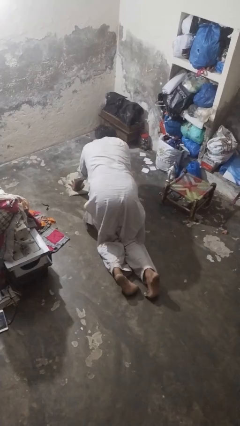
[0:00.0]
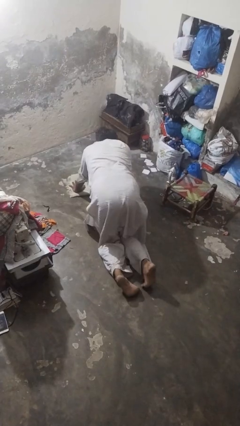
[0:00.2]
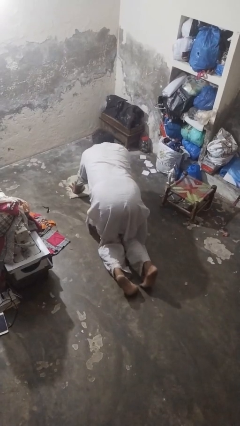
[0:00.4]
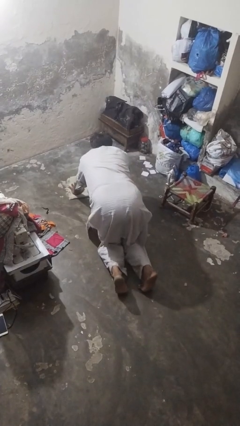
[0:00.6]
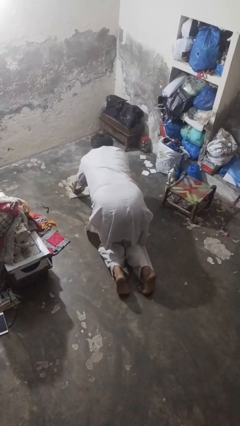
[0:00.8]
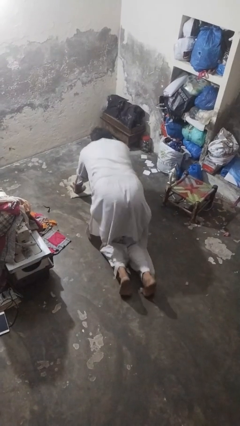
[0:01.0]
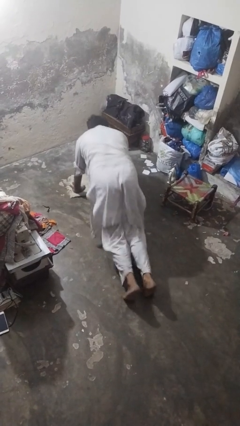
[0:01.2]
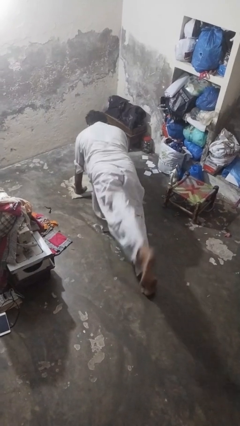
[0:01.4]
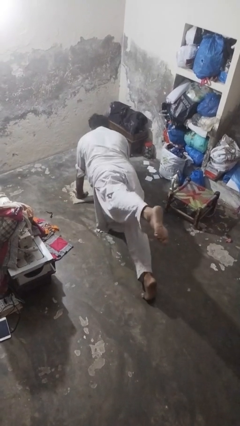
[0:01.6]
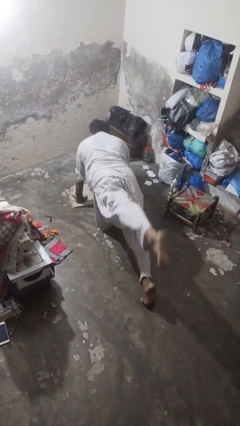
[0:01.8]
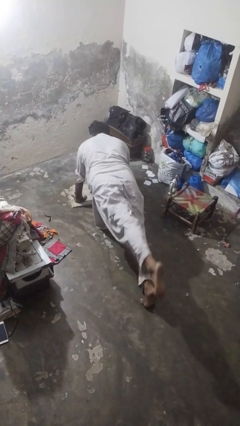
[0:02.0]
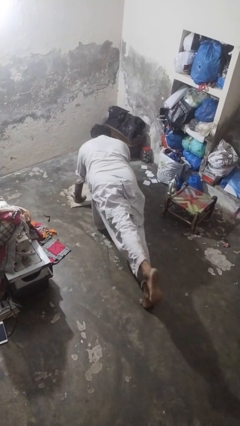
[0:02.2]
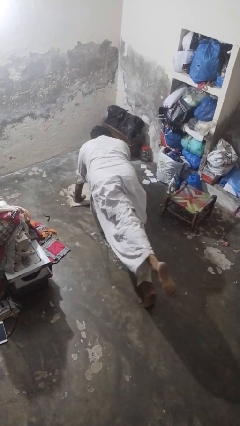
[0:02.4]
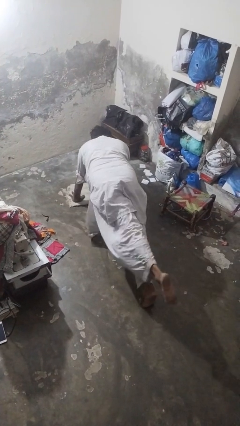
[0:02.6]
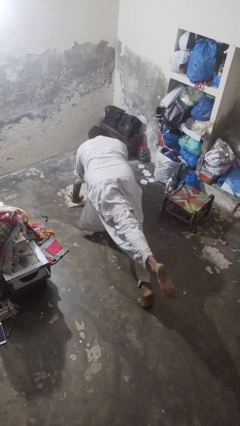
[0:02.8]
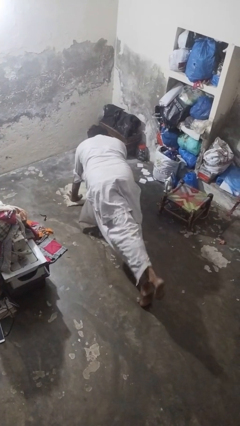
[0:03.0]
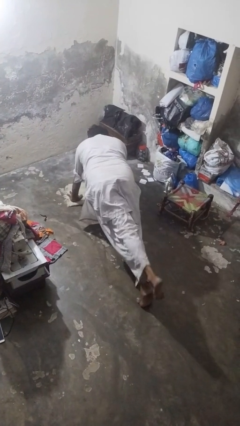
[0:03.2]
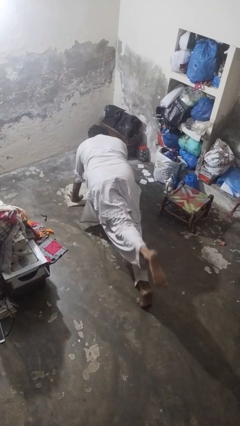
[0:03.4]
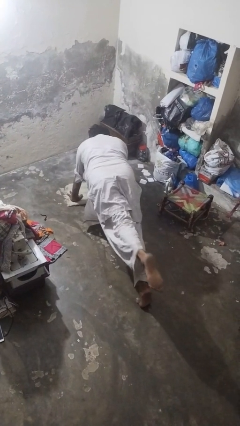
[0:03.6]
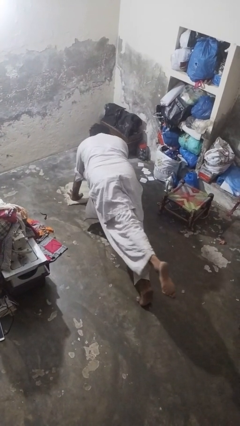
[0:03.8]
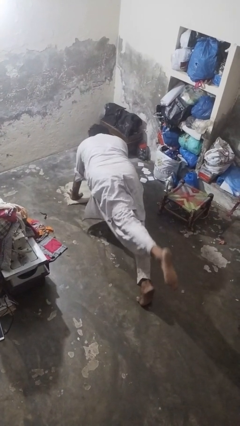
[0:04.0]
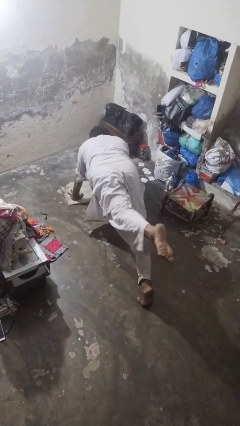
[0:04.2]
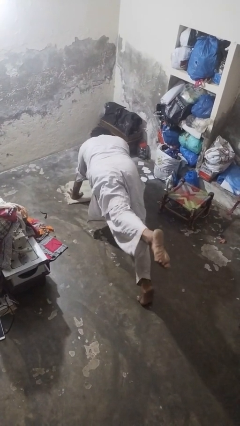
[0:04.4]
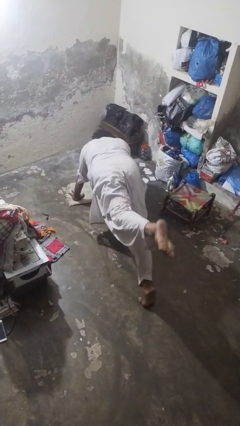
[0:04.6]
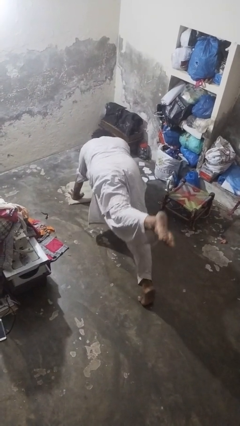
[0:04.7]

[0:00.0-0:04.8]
person handstand

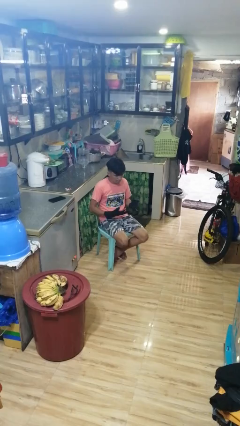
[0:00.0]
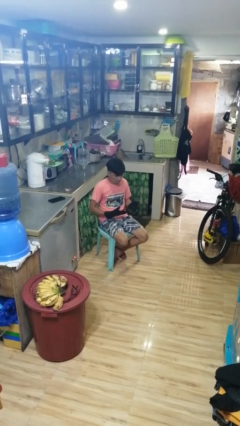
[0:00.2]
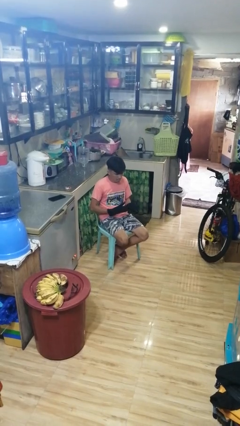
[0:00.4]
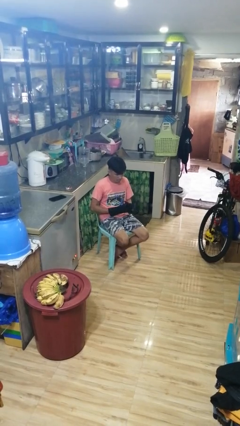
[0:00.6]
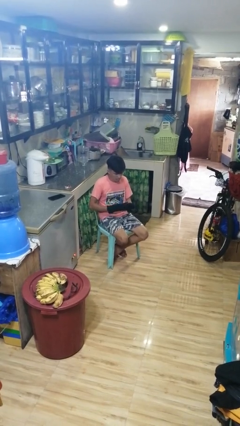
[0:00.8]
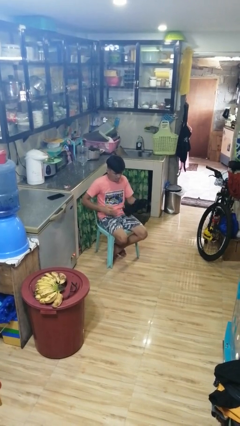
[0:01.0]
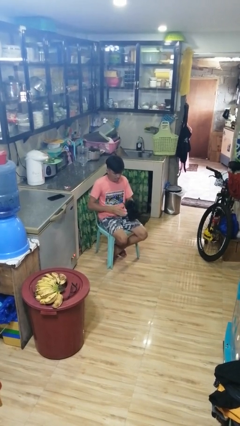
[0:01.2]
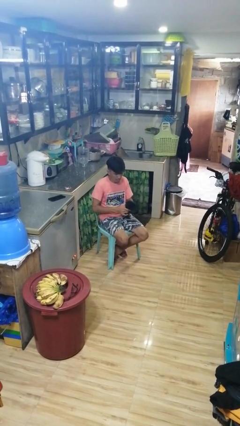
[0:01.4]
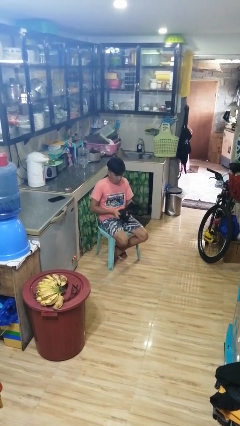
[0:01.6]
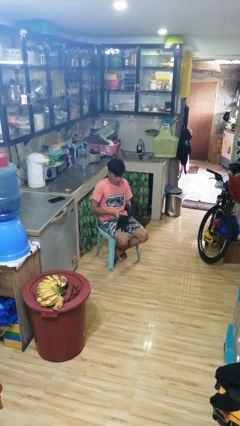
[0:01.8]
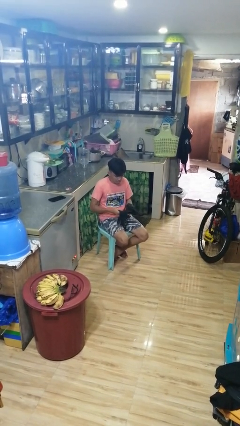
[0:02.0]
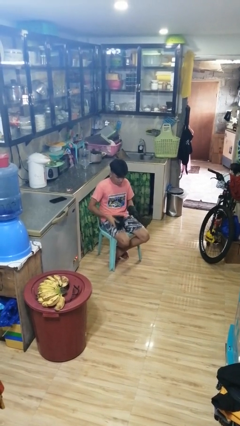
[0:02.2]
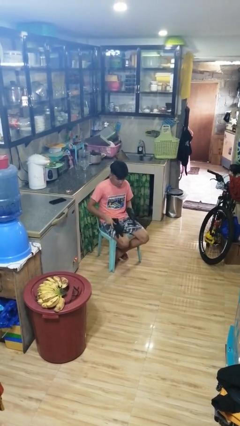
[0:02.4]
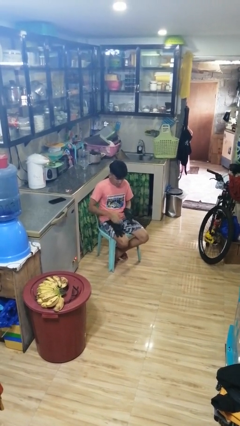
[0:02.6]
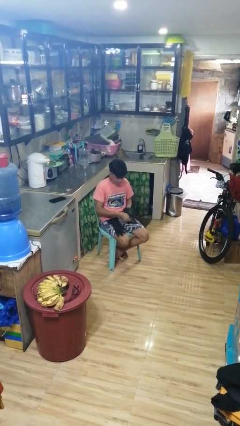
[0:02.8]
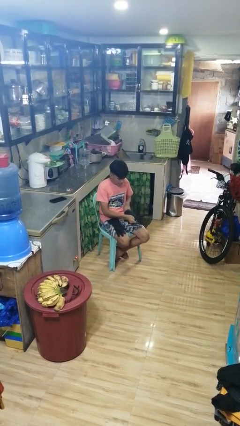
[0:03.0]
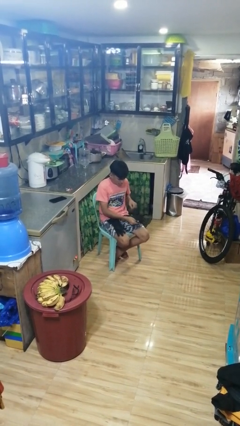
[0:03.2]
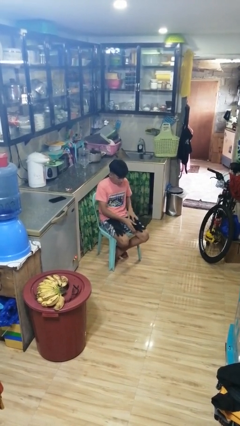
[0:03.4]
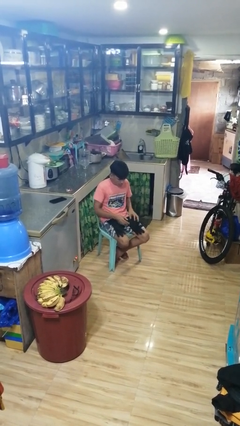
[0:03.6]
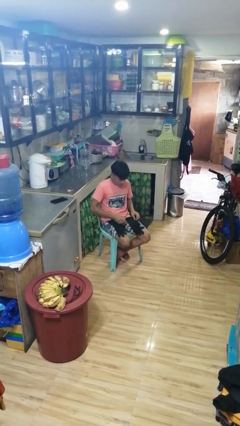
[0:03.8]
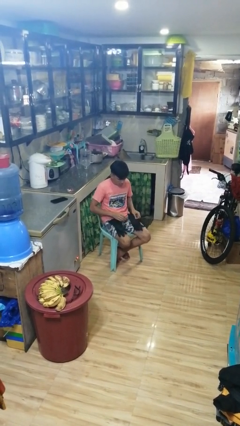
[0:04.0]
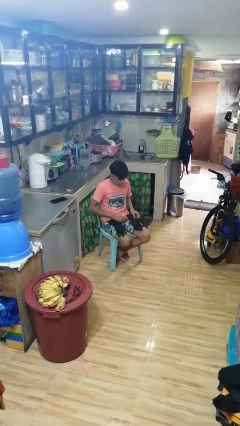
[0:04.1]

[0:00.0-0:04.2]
person takes off gloves

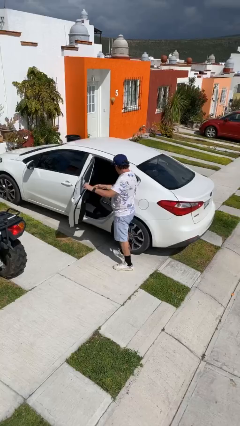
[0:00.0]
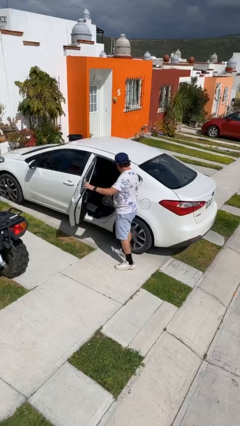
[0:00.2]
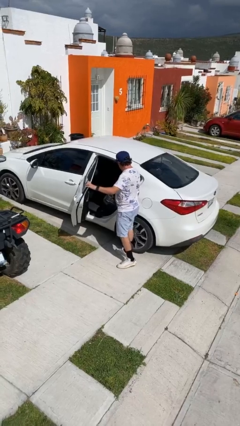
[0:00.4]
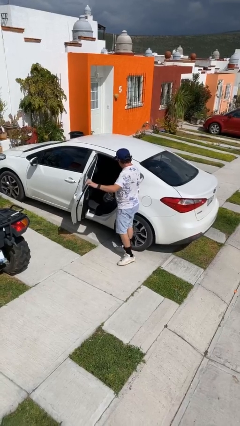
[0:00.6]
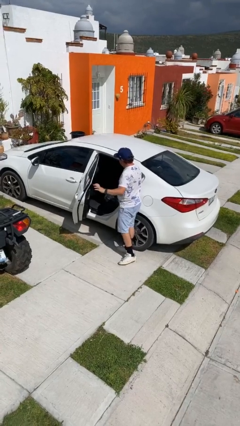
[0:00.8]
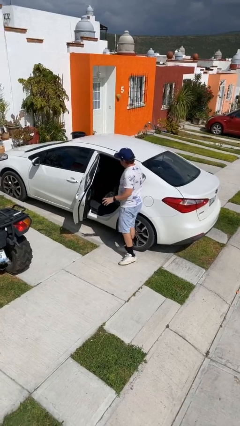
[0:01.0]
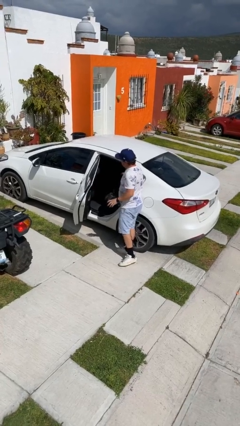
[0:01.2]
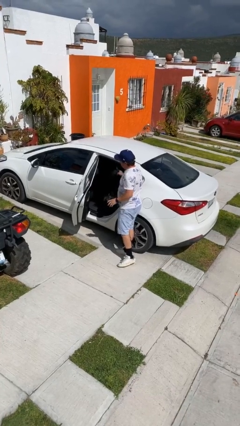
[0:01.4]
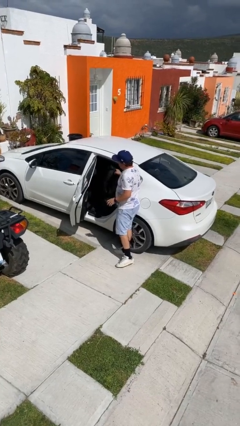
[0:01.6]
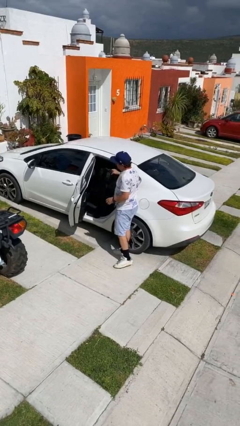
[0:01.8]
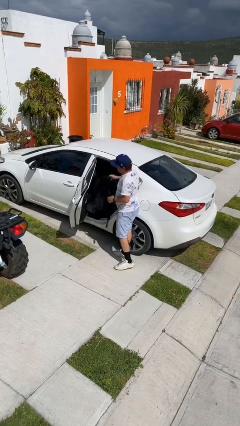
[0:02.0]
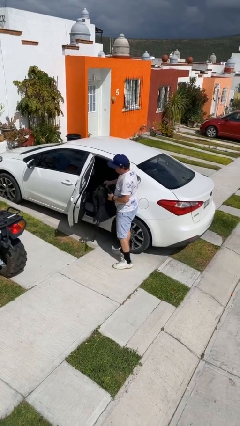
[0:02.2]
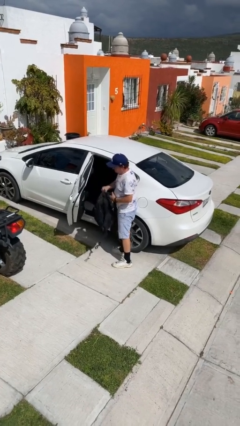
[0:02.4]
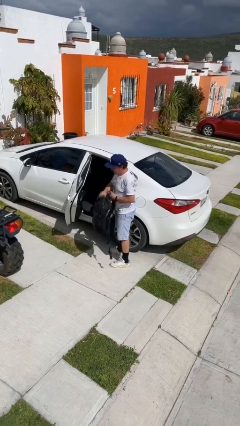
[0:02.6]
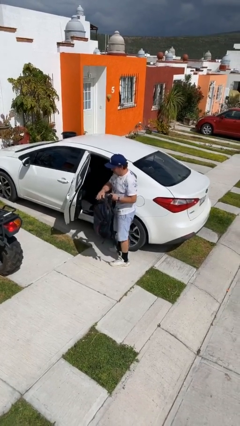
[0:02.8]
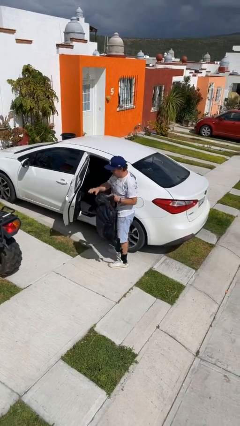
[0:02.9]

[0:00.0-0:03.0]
person unloads car

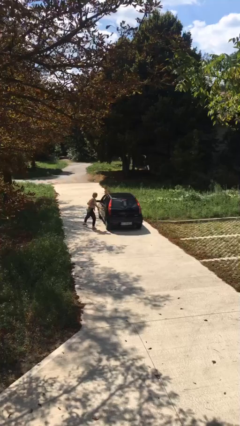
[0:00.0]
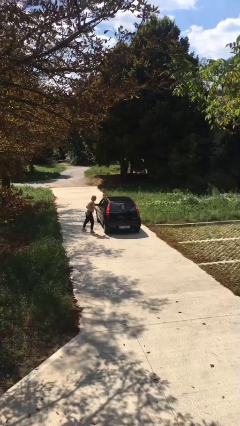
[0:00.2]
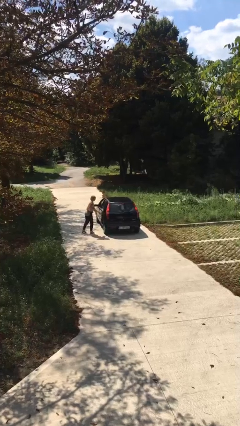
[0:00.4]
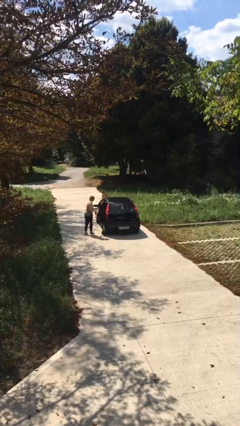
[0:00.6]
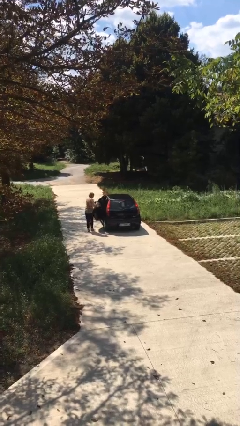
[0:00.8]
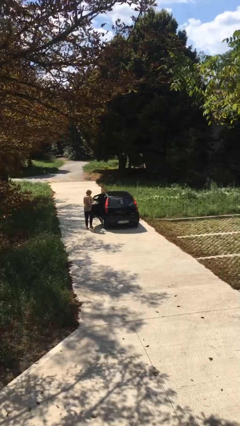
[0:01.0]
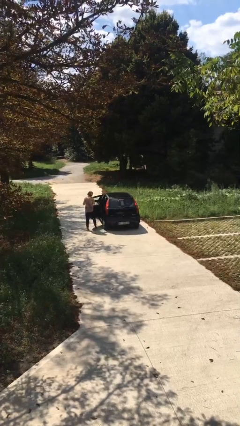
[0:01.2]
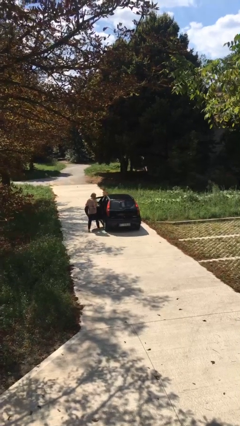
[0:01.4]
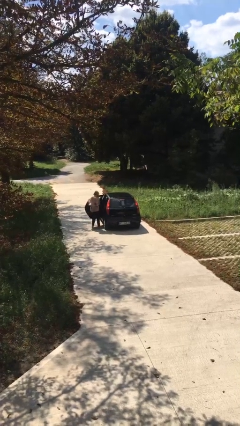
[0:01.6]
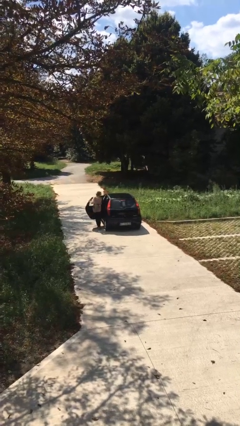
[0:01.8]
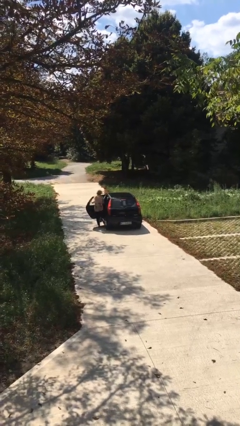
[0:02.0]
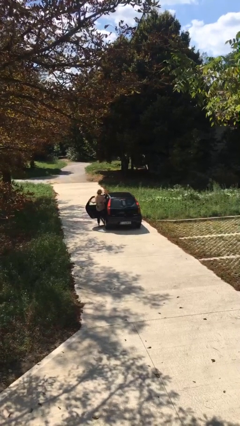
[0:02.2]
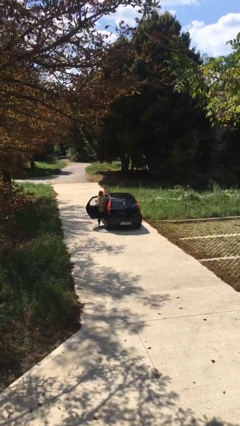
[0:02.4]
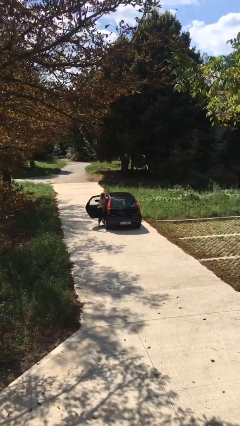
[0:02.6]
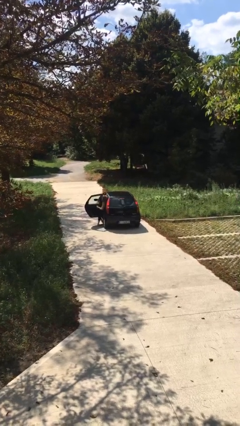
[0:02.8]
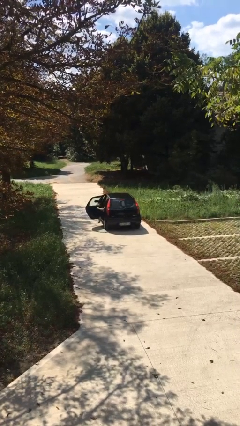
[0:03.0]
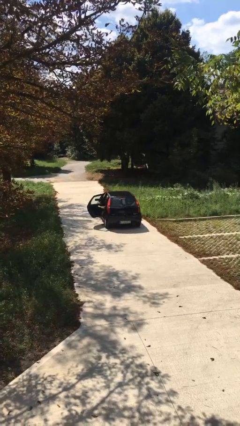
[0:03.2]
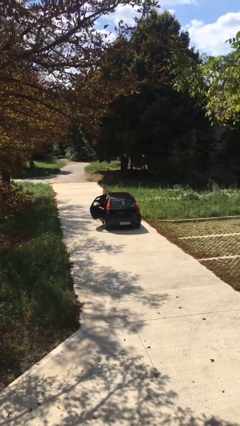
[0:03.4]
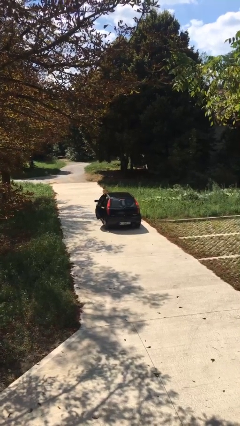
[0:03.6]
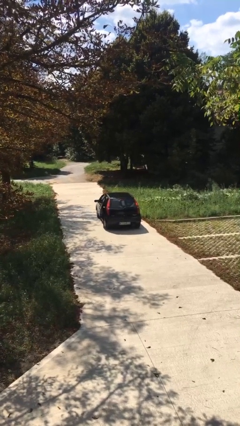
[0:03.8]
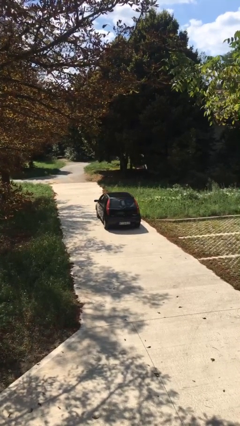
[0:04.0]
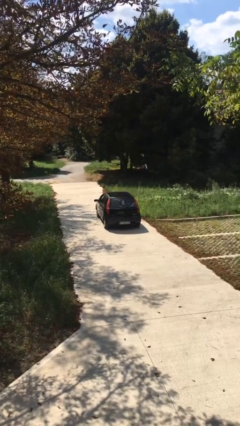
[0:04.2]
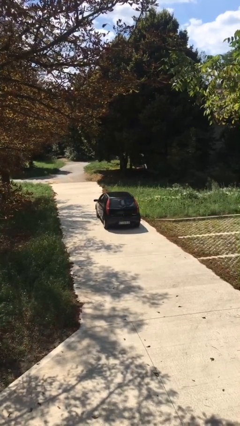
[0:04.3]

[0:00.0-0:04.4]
car picks up person

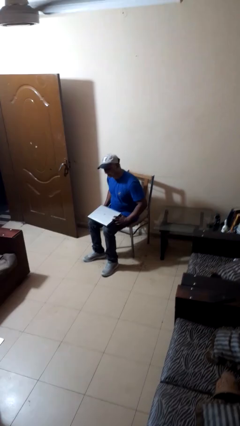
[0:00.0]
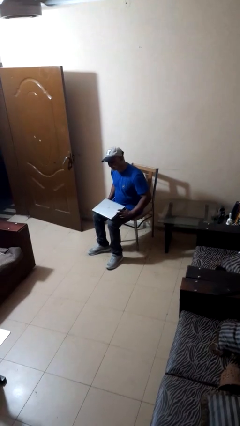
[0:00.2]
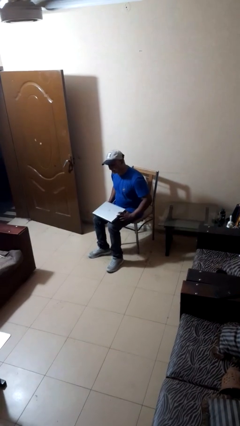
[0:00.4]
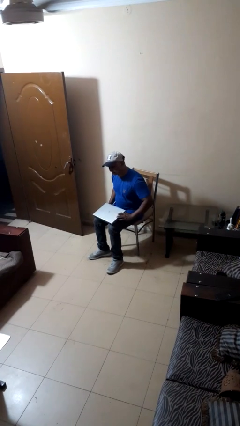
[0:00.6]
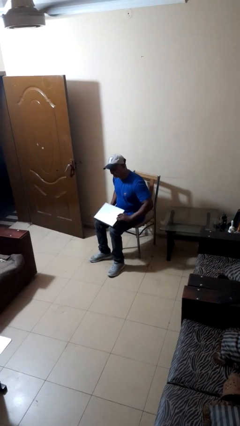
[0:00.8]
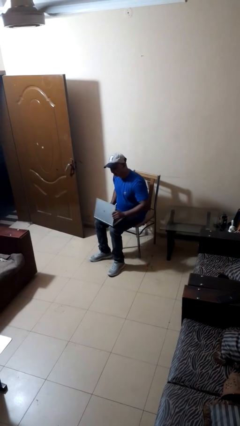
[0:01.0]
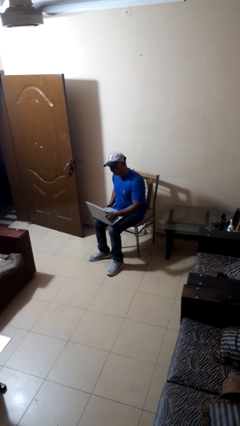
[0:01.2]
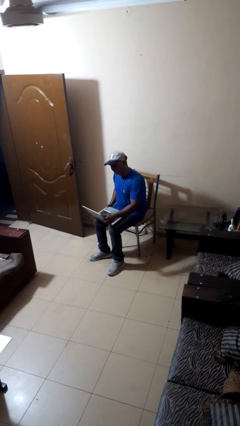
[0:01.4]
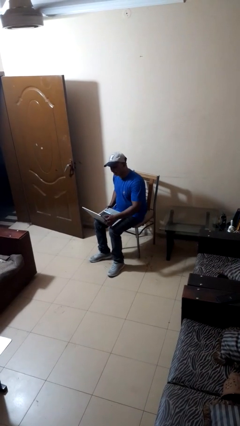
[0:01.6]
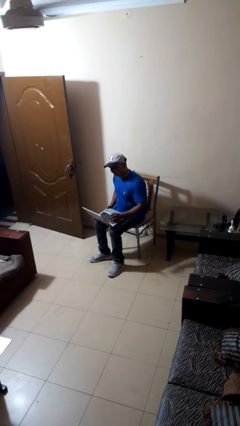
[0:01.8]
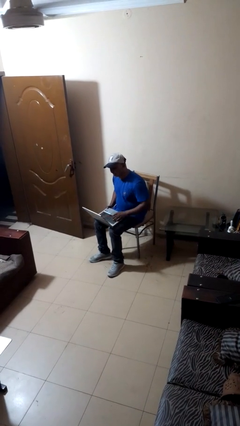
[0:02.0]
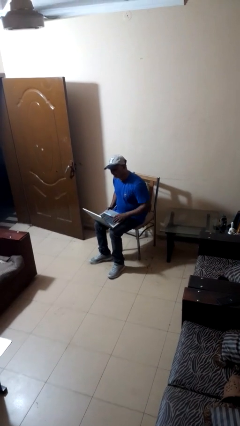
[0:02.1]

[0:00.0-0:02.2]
person opens laptop
